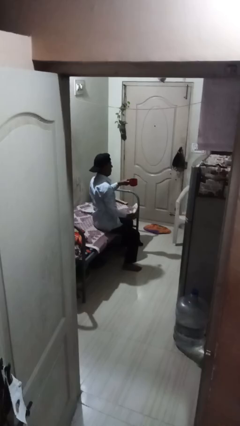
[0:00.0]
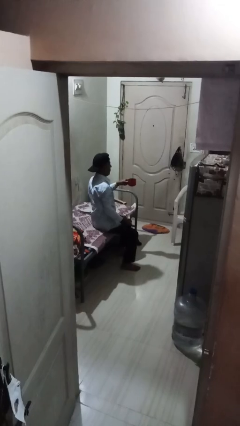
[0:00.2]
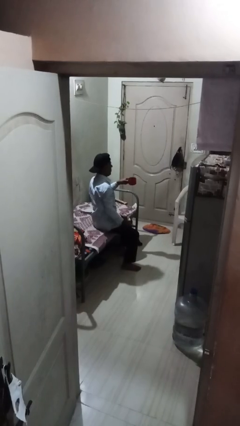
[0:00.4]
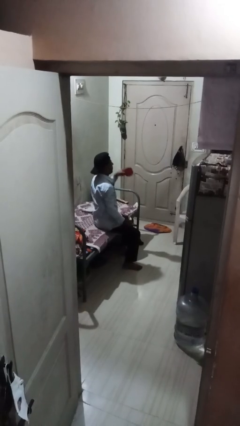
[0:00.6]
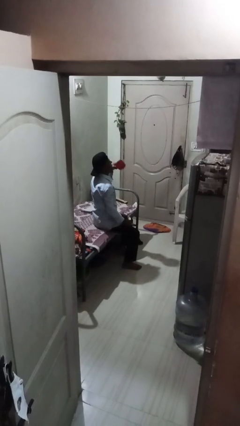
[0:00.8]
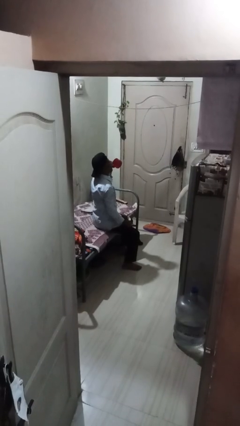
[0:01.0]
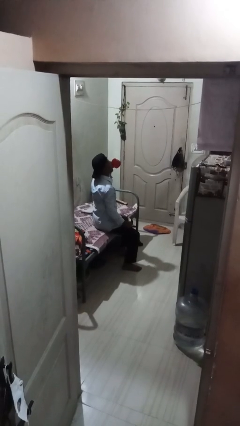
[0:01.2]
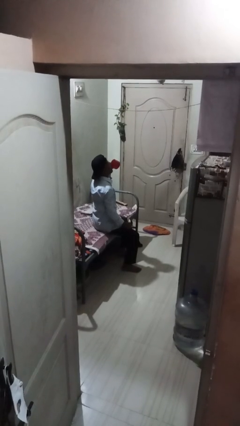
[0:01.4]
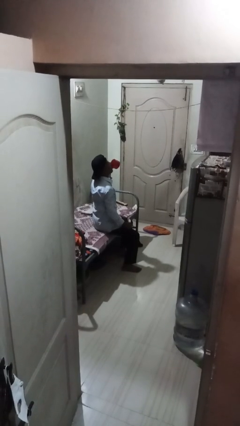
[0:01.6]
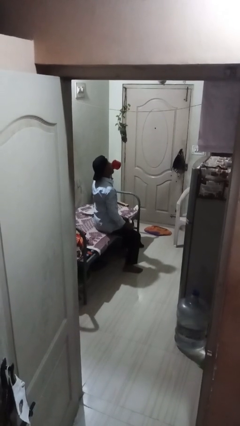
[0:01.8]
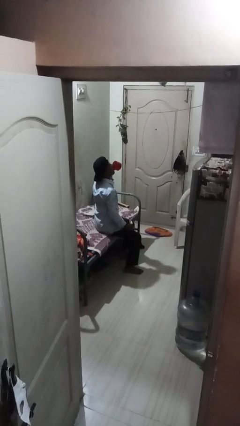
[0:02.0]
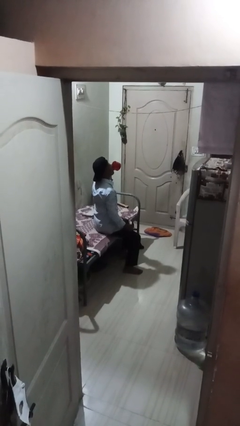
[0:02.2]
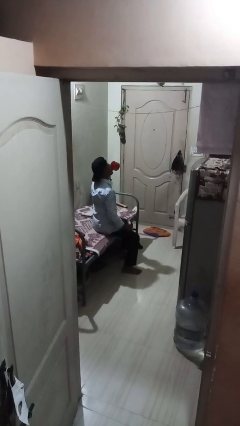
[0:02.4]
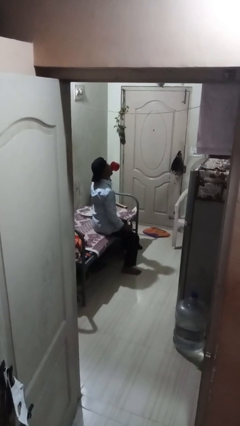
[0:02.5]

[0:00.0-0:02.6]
person drinks from mug

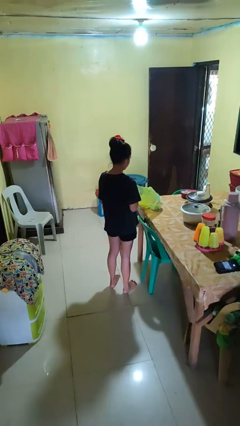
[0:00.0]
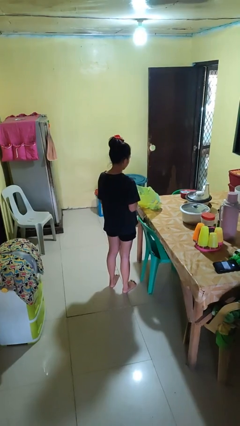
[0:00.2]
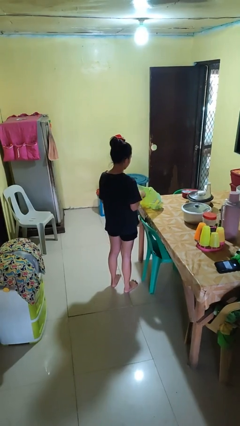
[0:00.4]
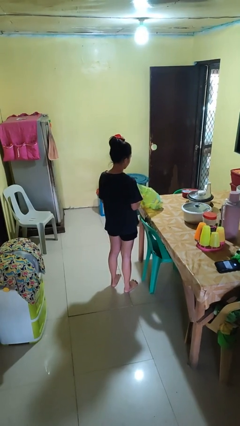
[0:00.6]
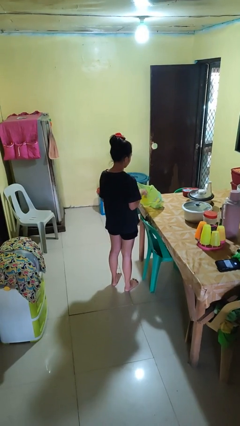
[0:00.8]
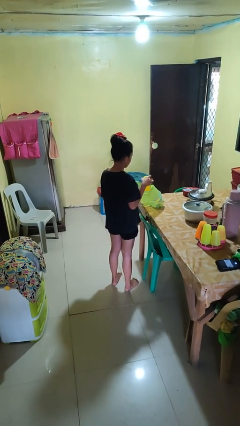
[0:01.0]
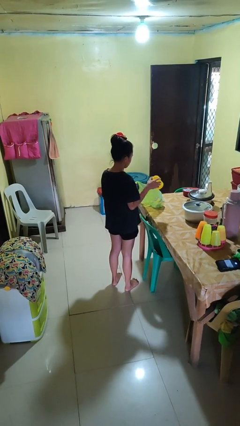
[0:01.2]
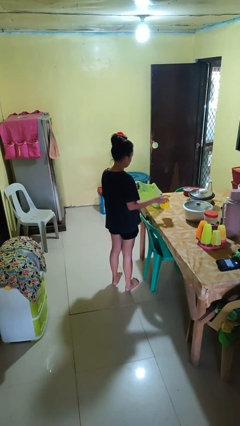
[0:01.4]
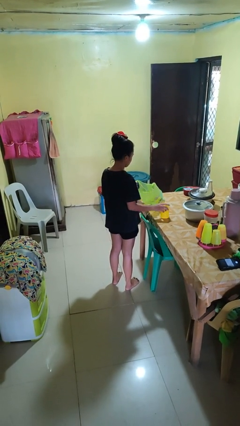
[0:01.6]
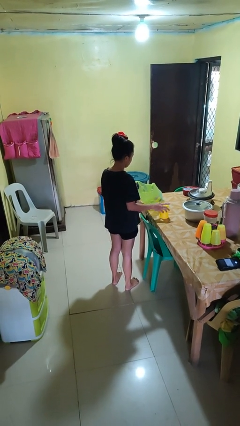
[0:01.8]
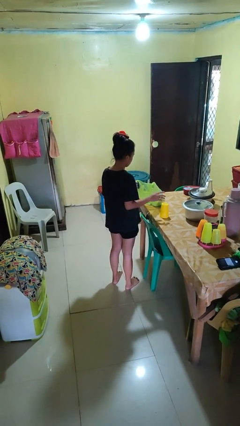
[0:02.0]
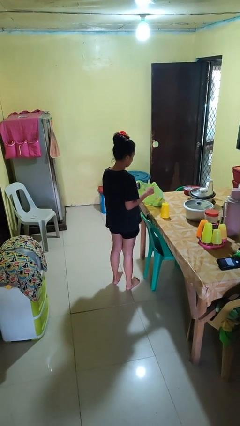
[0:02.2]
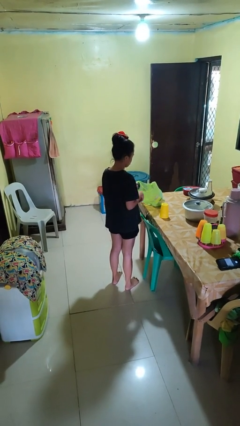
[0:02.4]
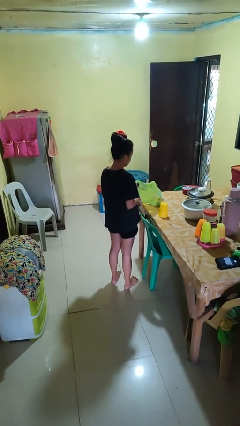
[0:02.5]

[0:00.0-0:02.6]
person takes object from bag

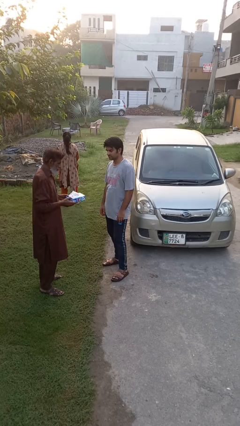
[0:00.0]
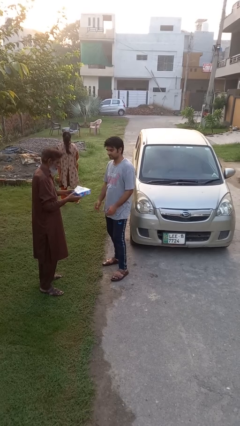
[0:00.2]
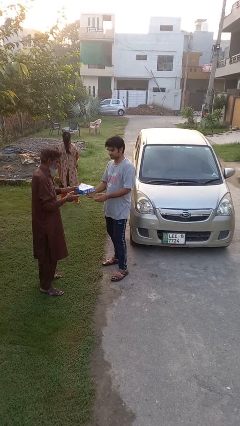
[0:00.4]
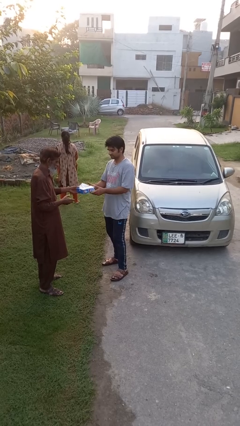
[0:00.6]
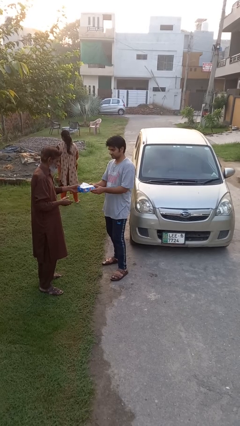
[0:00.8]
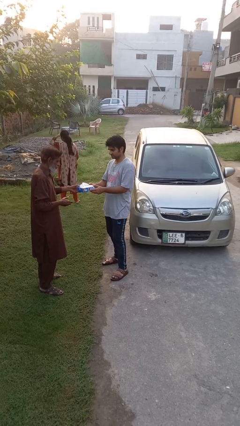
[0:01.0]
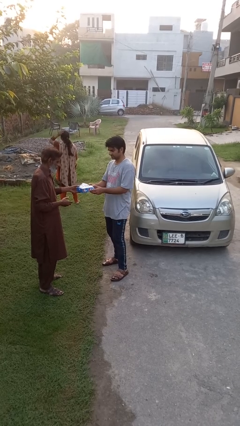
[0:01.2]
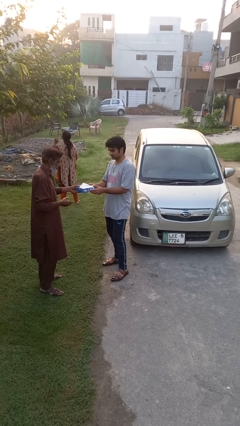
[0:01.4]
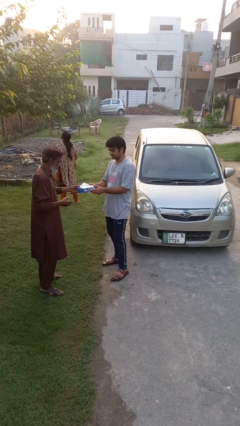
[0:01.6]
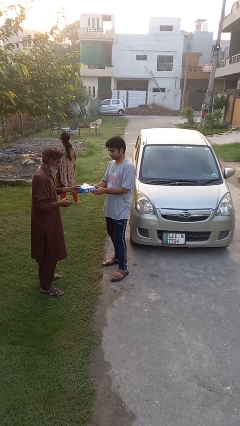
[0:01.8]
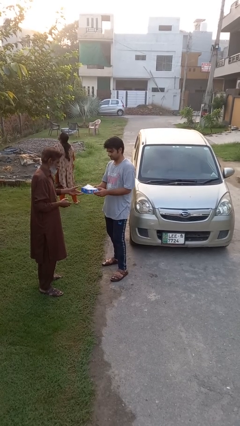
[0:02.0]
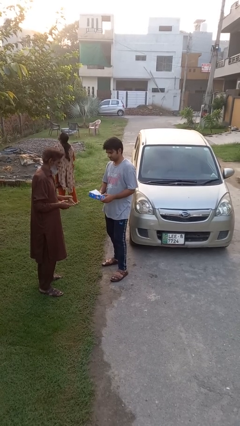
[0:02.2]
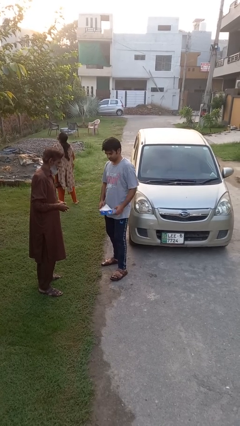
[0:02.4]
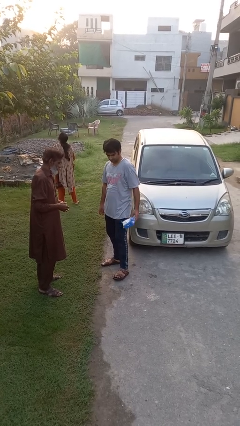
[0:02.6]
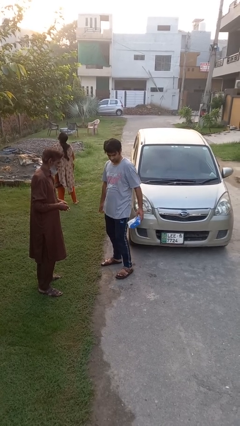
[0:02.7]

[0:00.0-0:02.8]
person transfers object to person

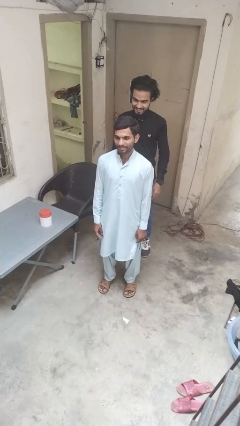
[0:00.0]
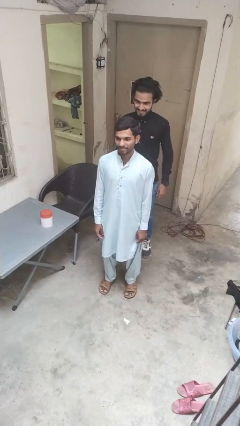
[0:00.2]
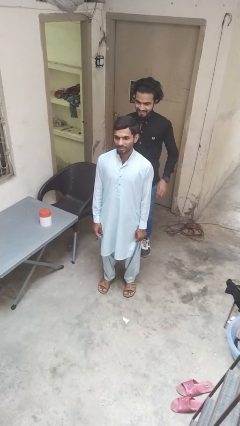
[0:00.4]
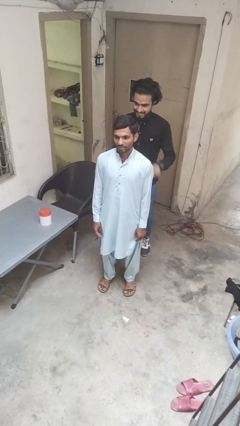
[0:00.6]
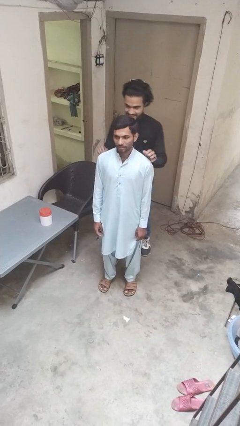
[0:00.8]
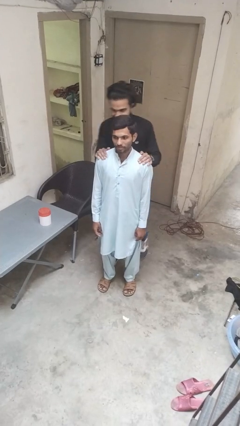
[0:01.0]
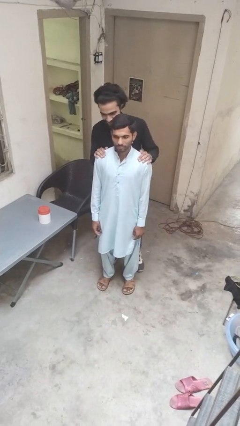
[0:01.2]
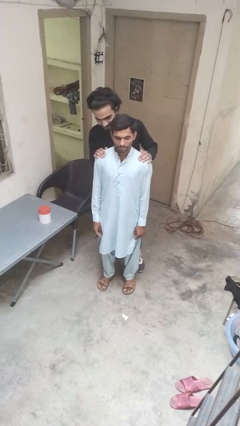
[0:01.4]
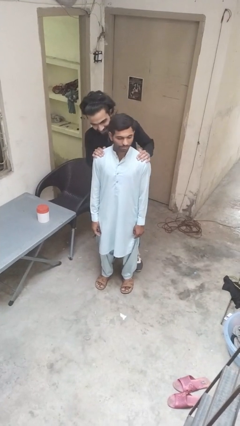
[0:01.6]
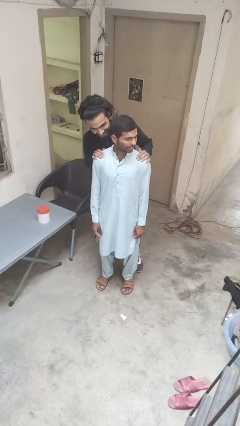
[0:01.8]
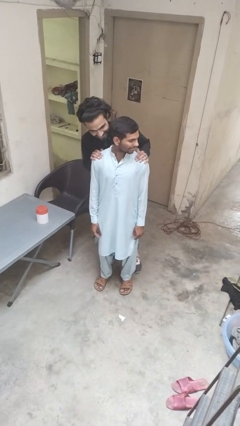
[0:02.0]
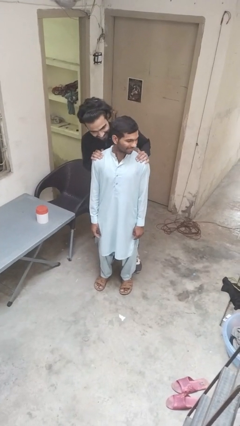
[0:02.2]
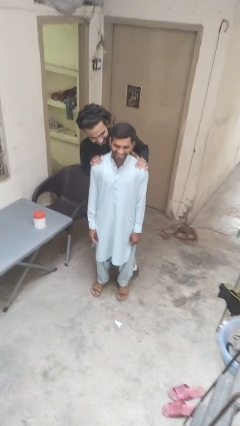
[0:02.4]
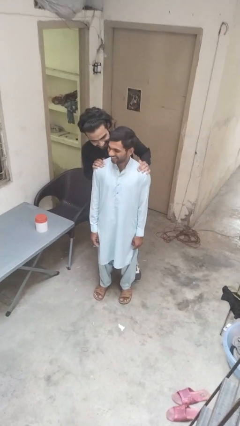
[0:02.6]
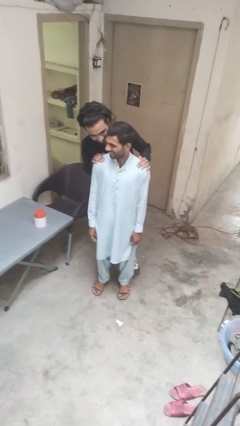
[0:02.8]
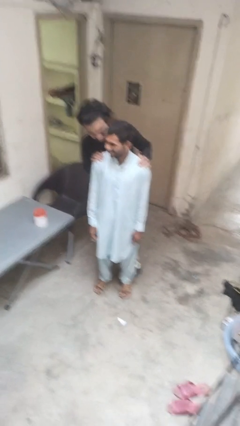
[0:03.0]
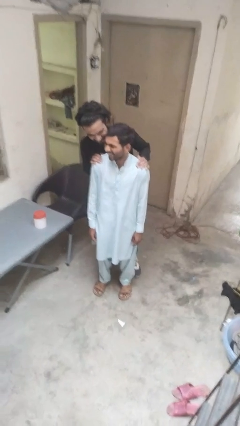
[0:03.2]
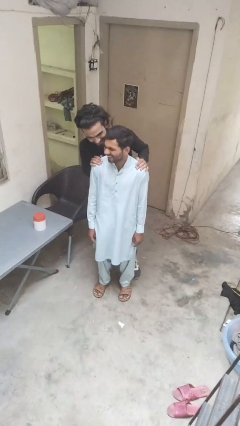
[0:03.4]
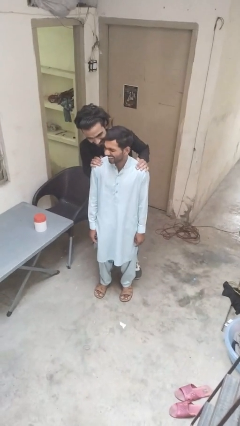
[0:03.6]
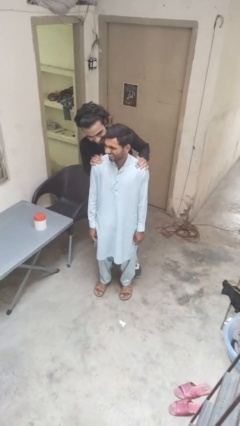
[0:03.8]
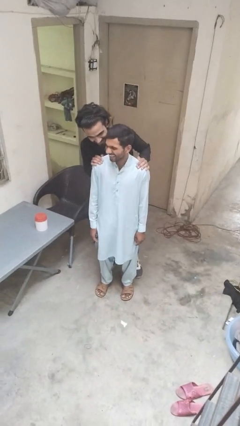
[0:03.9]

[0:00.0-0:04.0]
person looks over shoulder

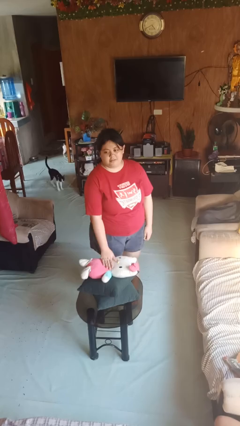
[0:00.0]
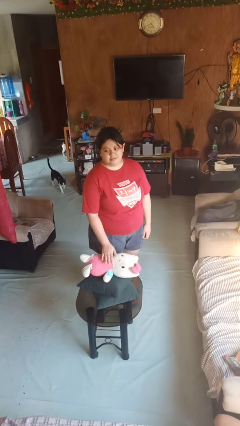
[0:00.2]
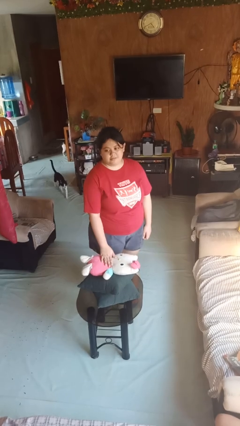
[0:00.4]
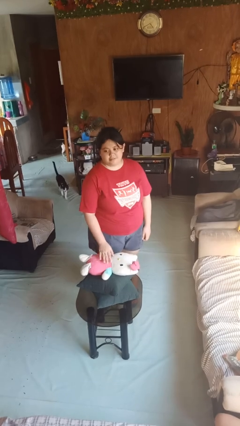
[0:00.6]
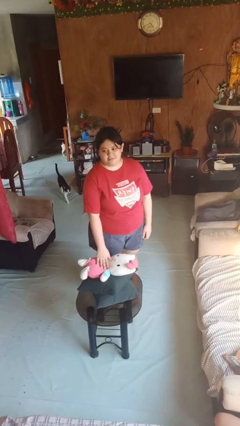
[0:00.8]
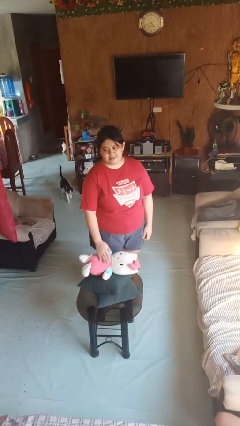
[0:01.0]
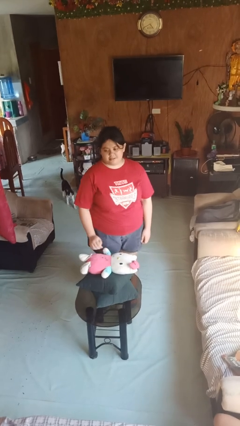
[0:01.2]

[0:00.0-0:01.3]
person taps object with finger

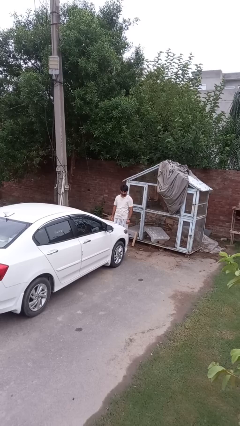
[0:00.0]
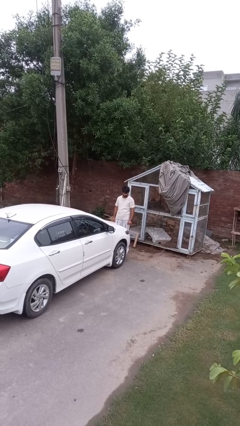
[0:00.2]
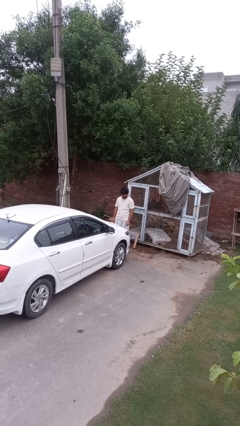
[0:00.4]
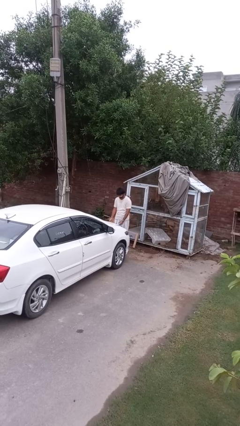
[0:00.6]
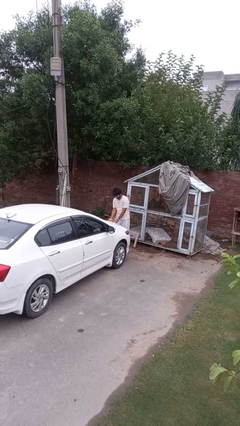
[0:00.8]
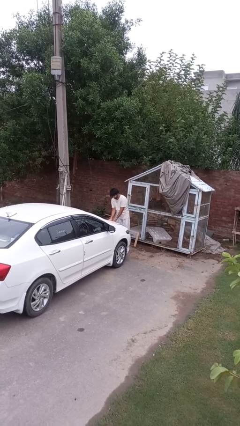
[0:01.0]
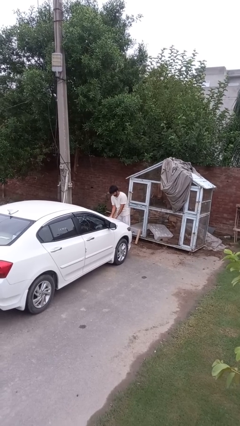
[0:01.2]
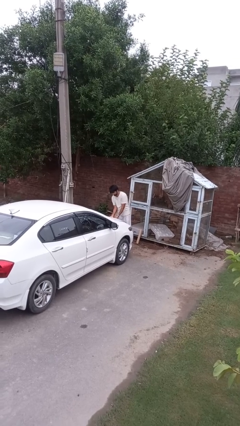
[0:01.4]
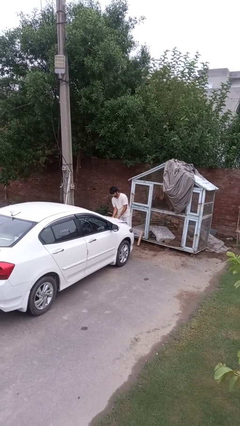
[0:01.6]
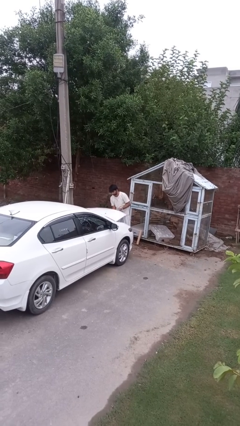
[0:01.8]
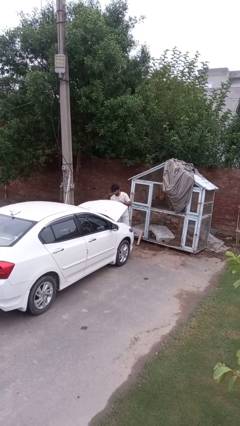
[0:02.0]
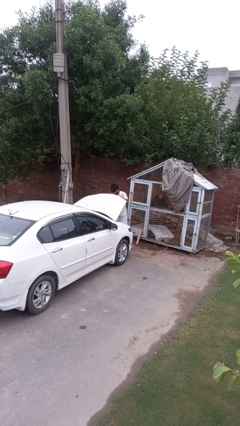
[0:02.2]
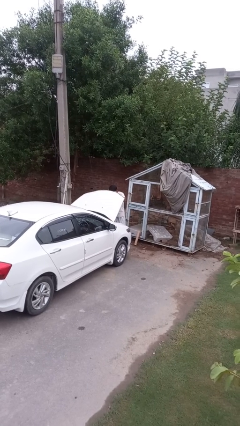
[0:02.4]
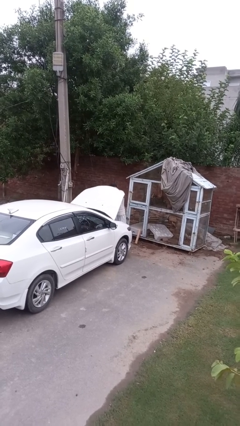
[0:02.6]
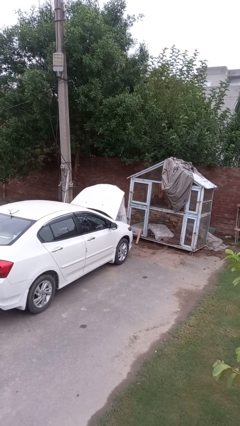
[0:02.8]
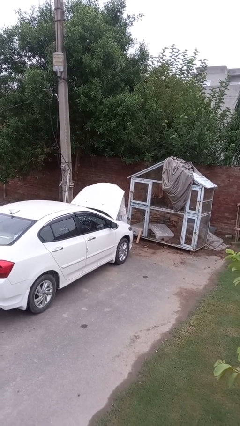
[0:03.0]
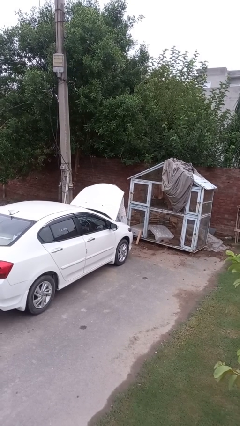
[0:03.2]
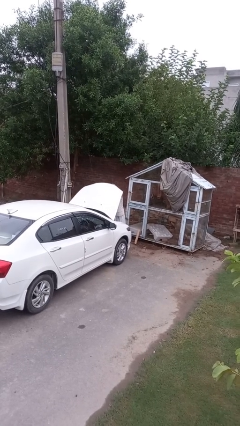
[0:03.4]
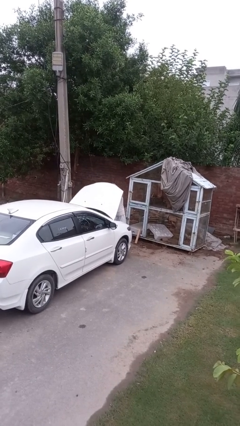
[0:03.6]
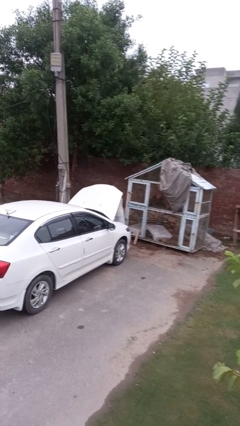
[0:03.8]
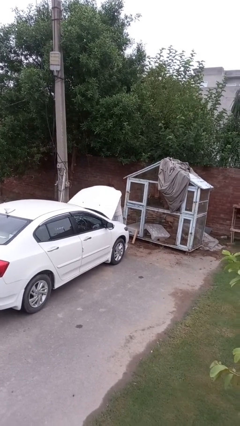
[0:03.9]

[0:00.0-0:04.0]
person opens car hood
